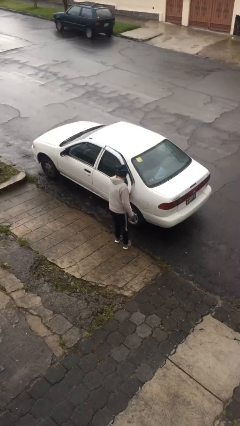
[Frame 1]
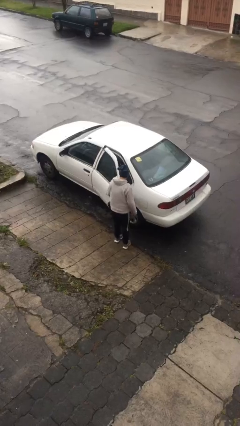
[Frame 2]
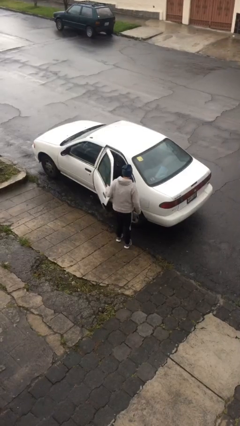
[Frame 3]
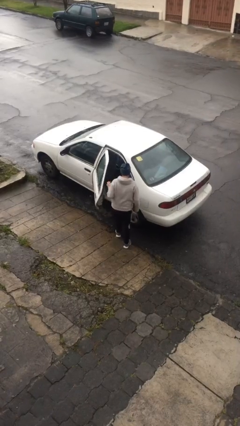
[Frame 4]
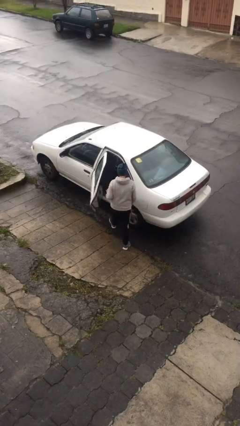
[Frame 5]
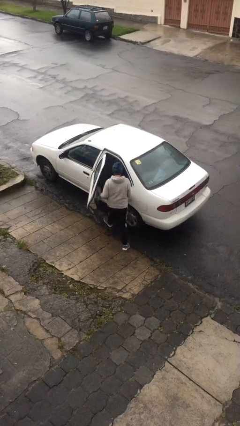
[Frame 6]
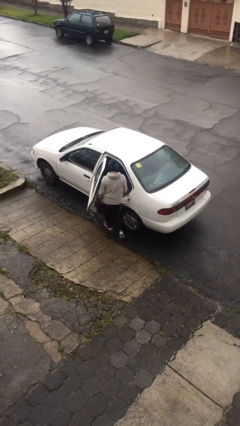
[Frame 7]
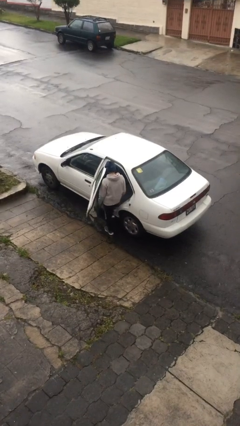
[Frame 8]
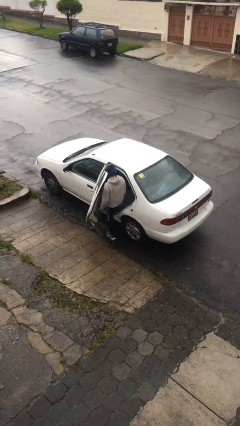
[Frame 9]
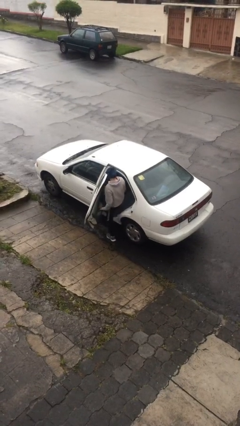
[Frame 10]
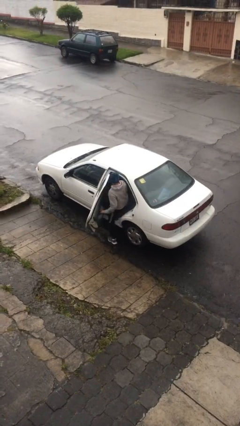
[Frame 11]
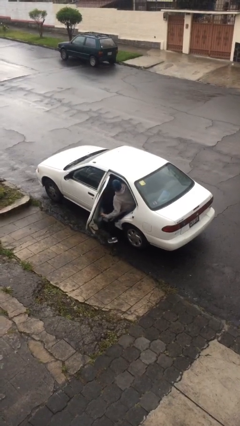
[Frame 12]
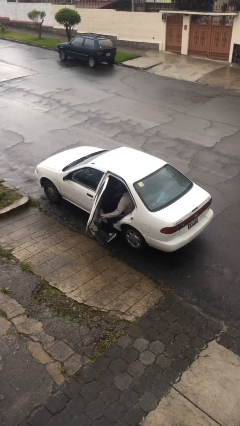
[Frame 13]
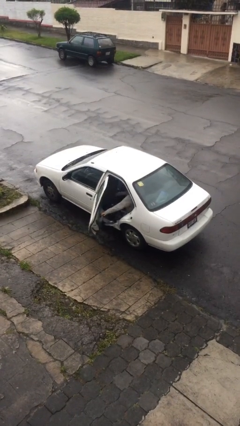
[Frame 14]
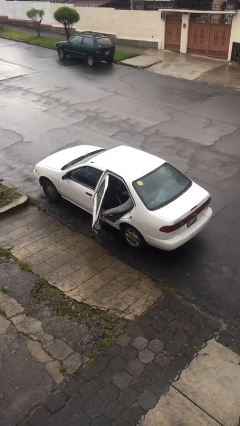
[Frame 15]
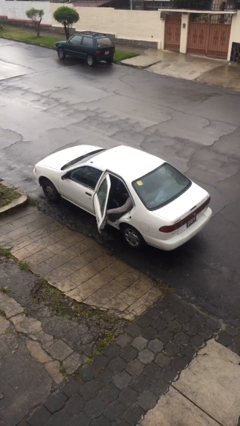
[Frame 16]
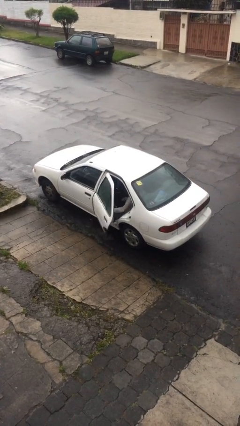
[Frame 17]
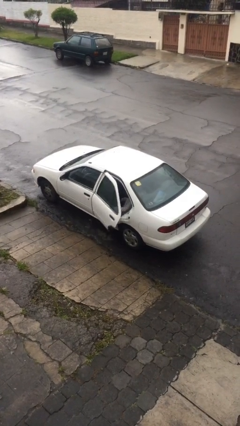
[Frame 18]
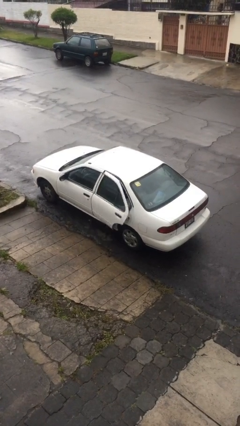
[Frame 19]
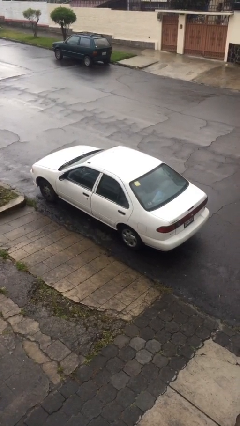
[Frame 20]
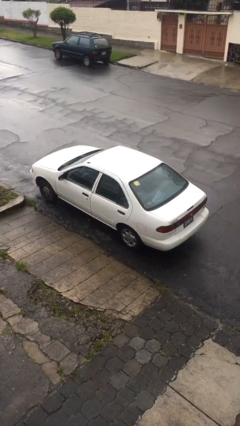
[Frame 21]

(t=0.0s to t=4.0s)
car picks up person

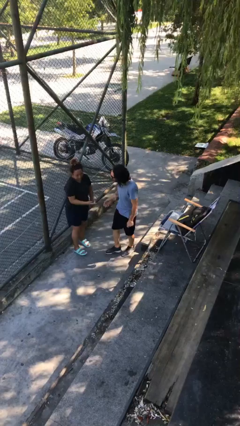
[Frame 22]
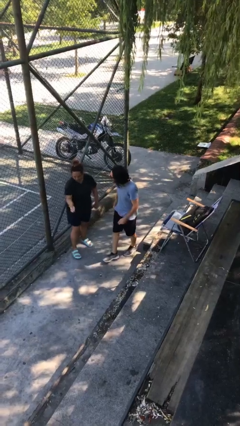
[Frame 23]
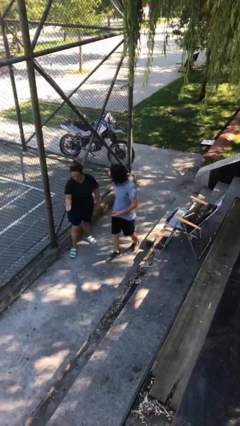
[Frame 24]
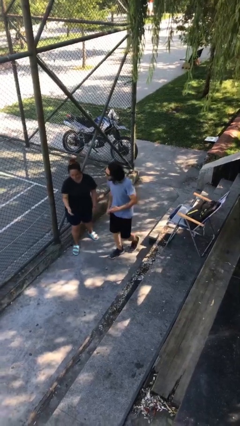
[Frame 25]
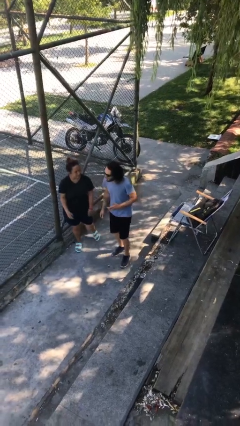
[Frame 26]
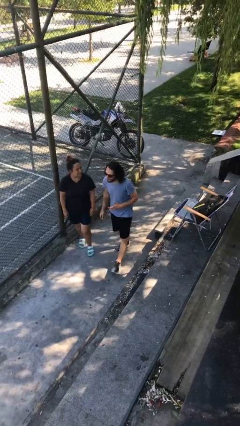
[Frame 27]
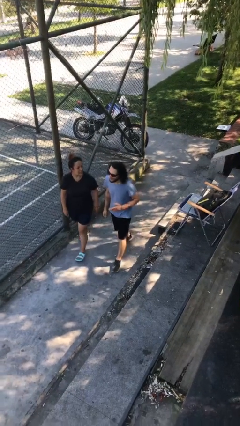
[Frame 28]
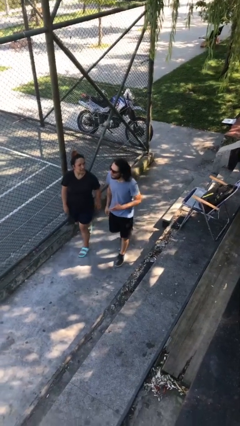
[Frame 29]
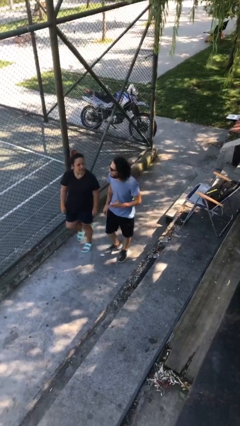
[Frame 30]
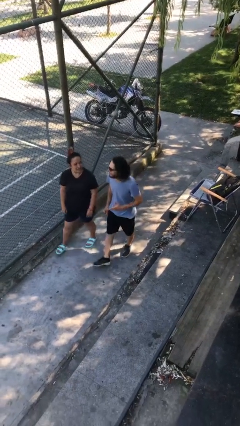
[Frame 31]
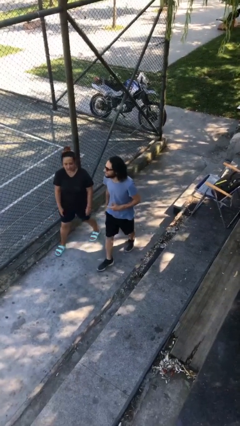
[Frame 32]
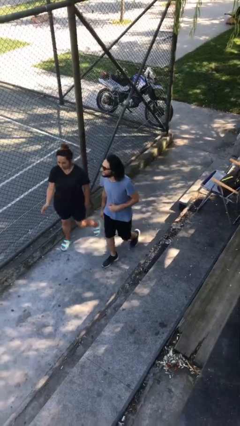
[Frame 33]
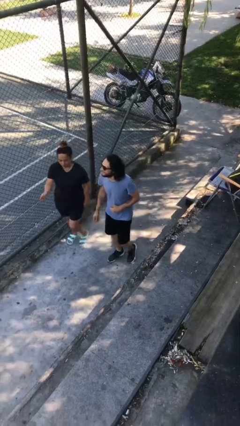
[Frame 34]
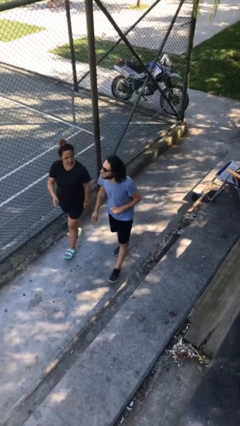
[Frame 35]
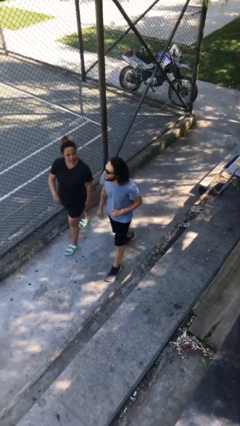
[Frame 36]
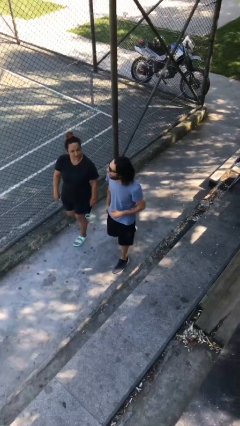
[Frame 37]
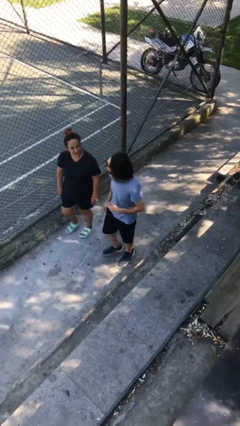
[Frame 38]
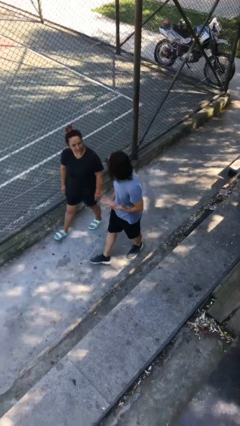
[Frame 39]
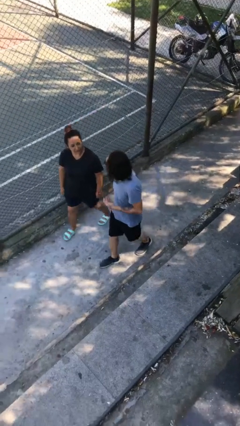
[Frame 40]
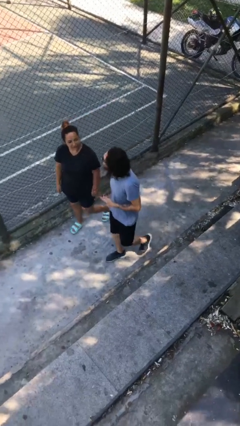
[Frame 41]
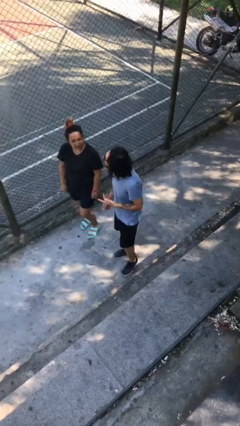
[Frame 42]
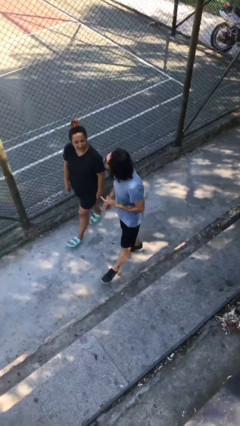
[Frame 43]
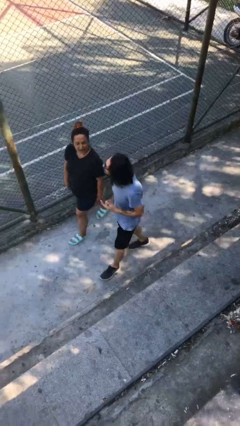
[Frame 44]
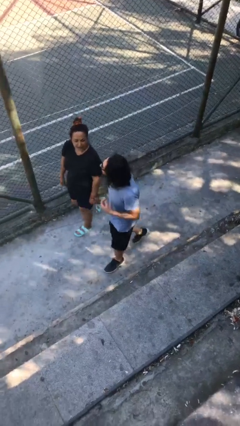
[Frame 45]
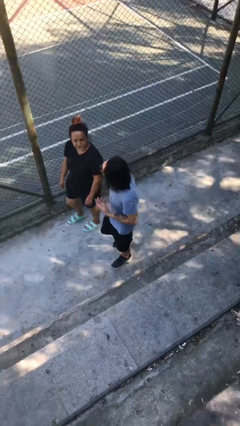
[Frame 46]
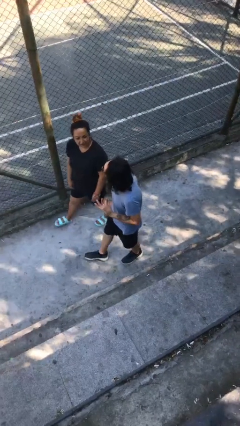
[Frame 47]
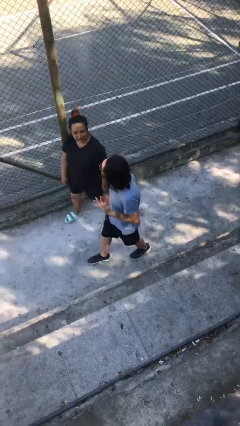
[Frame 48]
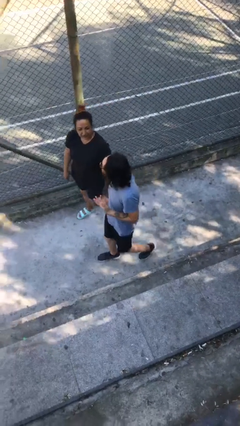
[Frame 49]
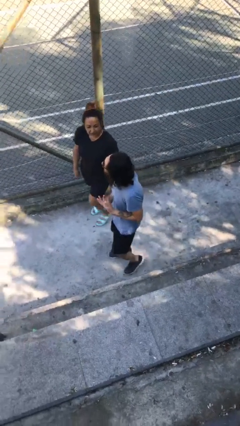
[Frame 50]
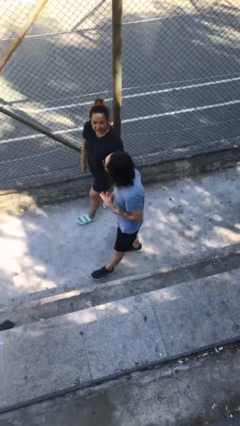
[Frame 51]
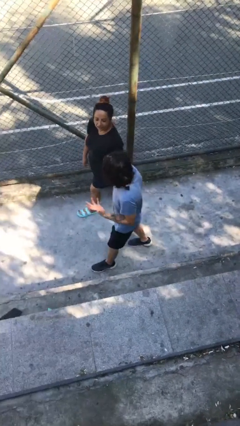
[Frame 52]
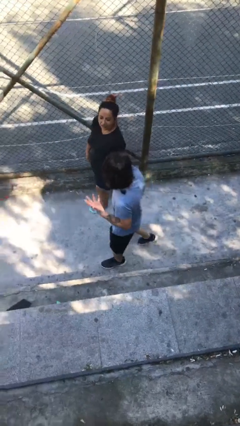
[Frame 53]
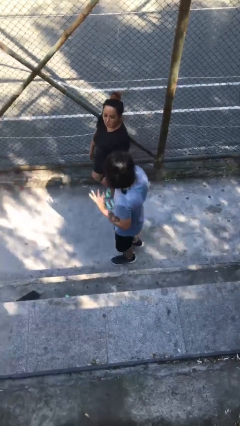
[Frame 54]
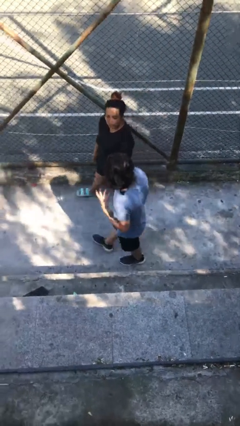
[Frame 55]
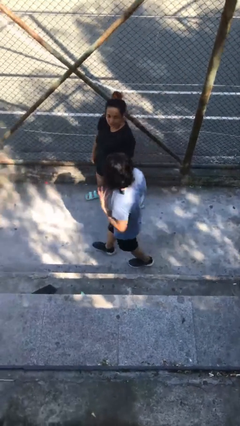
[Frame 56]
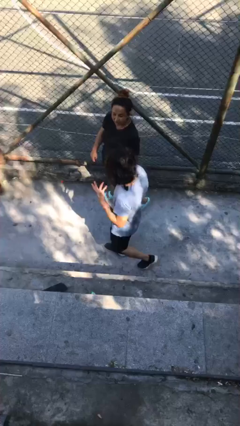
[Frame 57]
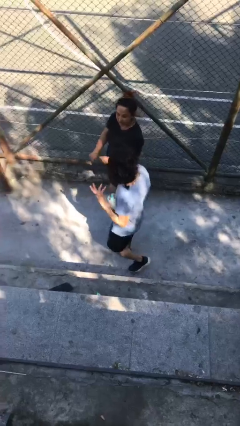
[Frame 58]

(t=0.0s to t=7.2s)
person talks to person

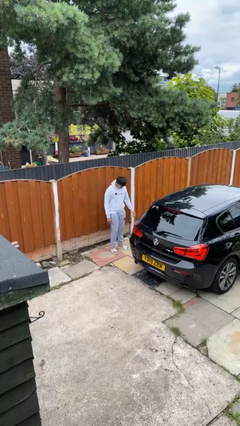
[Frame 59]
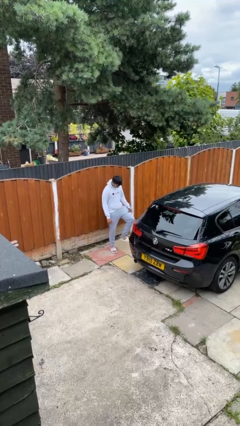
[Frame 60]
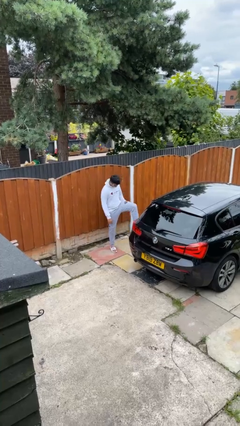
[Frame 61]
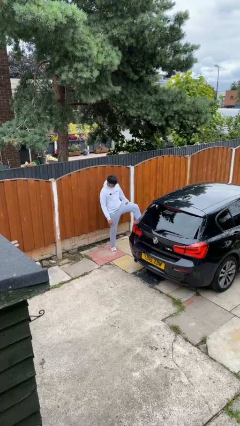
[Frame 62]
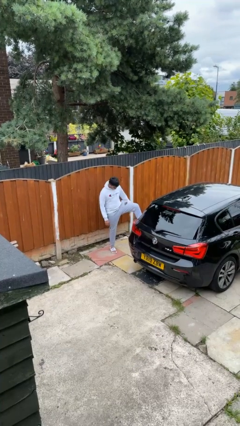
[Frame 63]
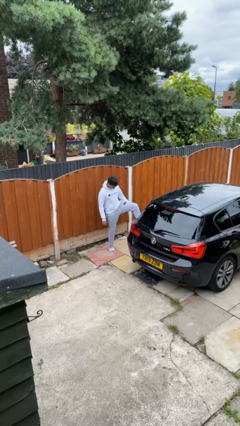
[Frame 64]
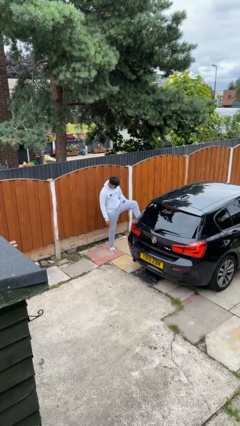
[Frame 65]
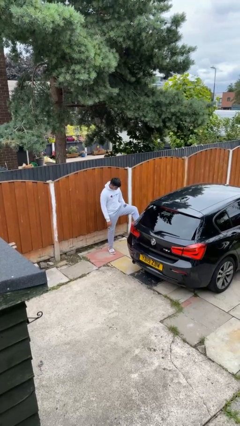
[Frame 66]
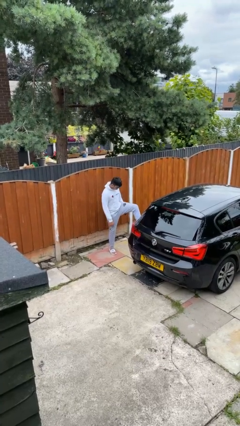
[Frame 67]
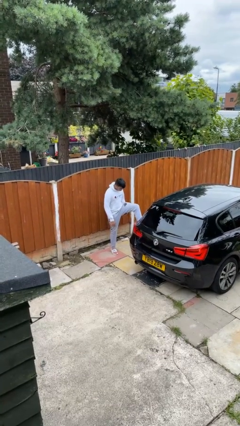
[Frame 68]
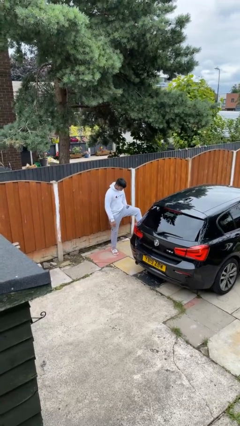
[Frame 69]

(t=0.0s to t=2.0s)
person kicks car tires

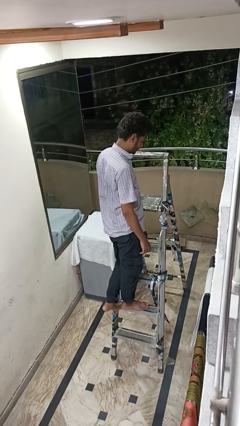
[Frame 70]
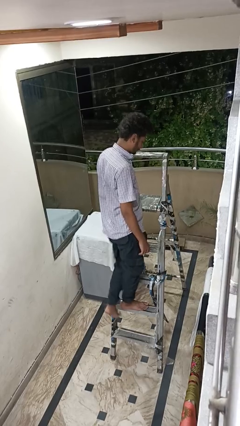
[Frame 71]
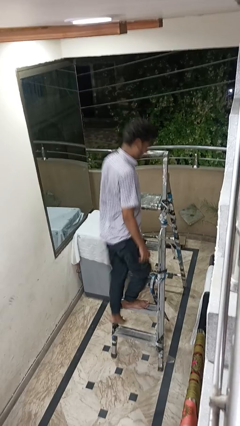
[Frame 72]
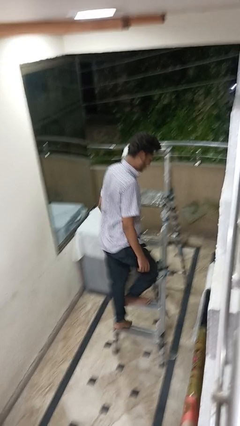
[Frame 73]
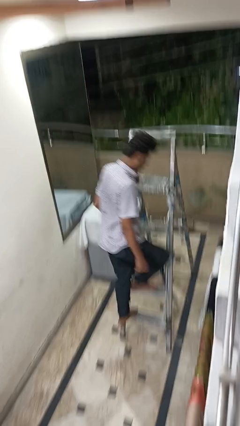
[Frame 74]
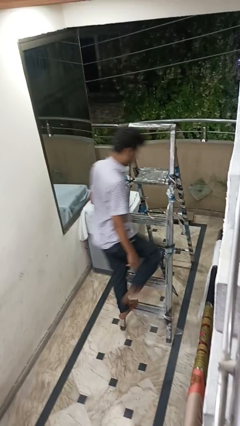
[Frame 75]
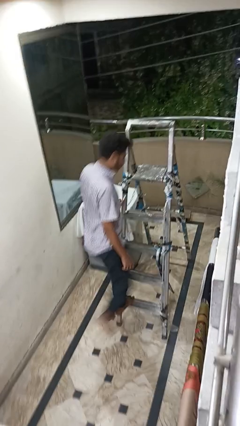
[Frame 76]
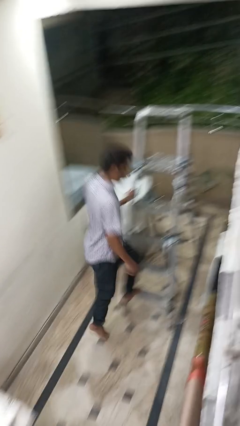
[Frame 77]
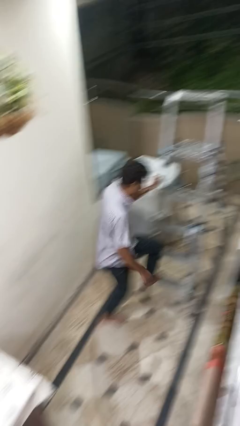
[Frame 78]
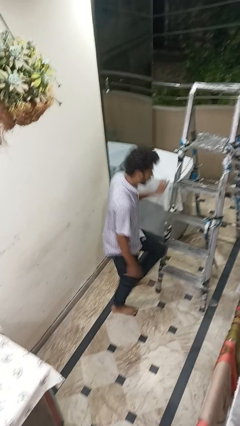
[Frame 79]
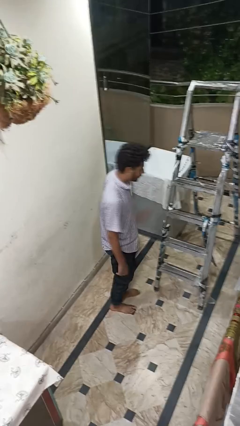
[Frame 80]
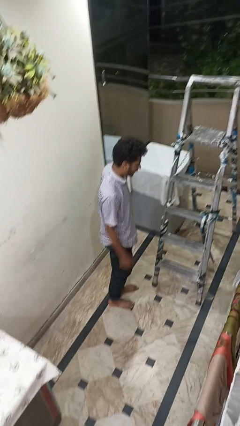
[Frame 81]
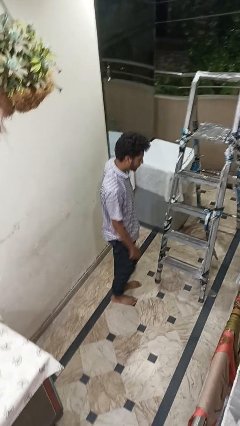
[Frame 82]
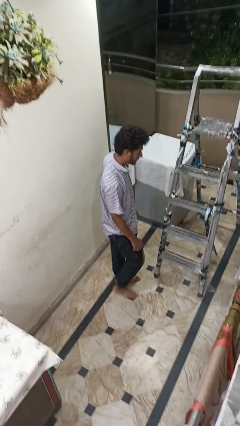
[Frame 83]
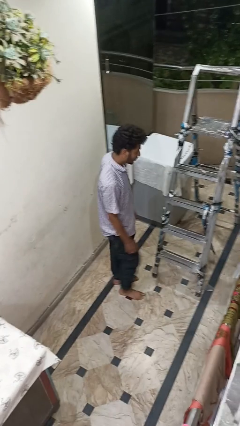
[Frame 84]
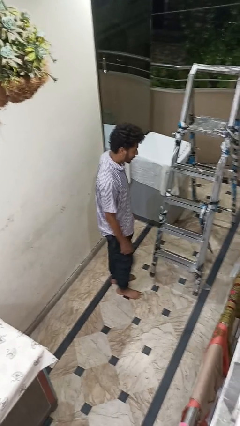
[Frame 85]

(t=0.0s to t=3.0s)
person climbs down ladder

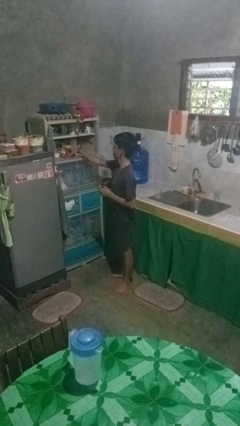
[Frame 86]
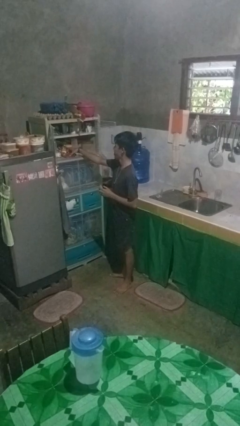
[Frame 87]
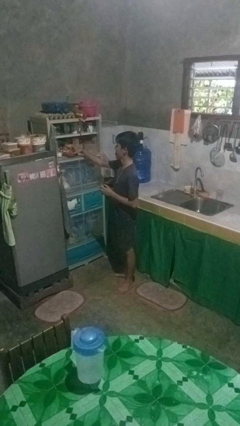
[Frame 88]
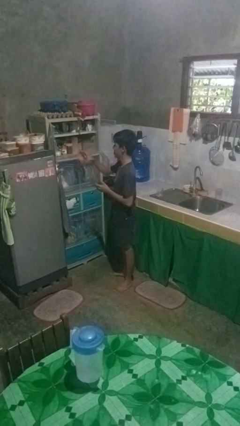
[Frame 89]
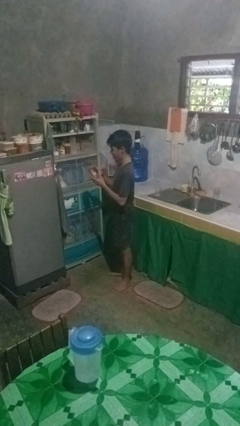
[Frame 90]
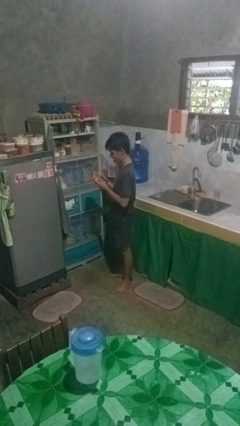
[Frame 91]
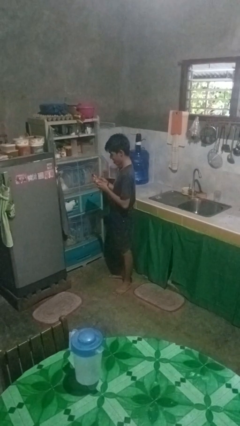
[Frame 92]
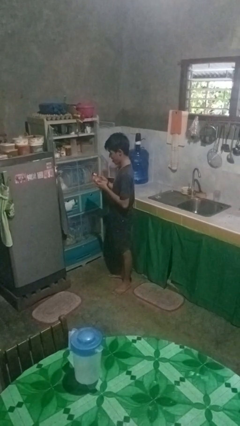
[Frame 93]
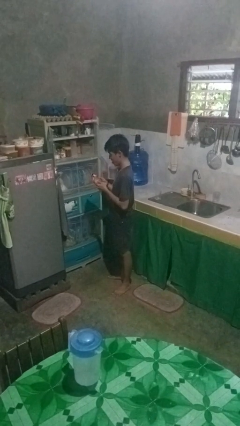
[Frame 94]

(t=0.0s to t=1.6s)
person takes object from cabinet
